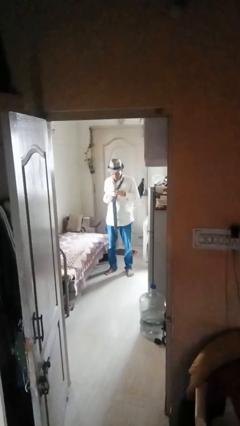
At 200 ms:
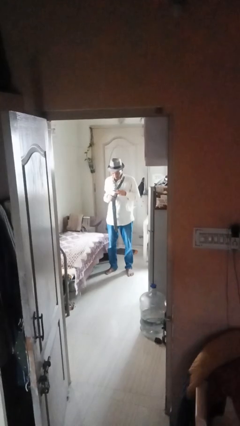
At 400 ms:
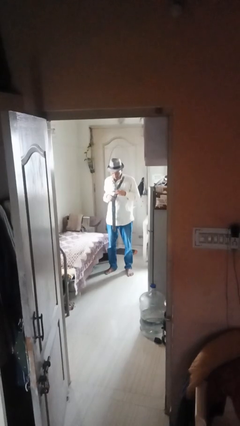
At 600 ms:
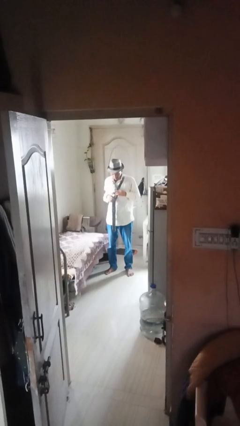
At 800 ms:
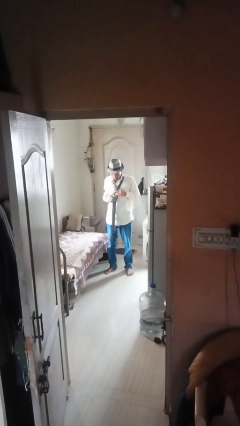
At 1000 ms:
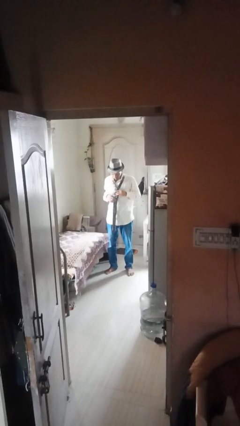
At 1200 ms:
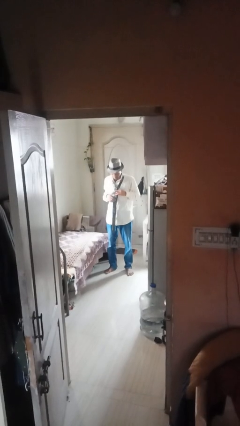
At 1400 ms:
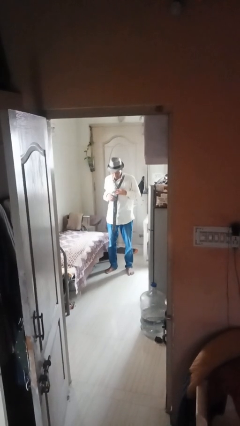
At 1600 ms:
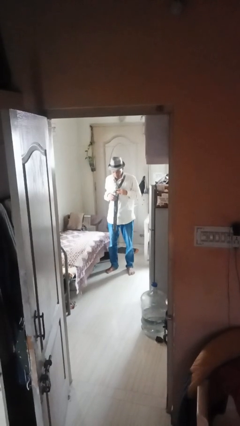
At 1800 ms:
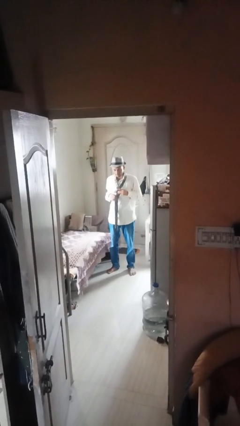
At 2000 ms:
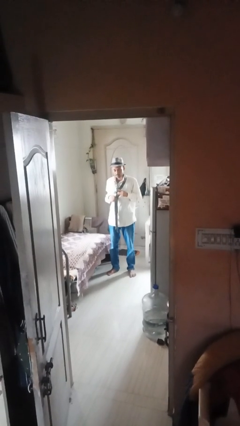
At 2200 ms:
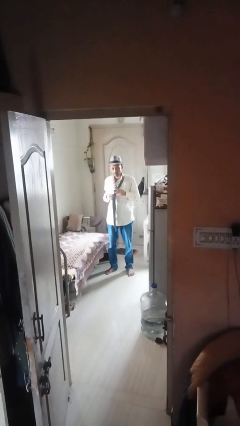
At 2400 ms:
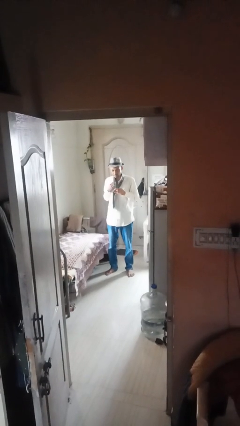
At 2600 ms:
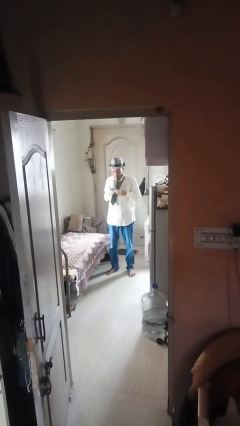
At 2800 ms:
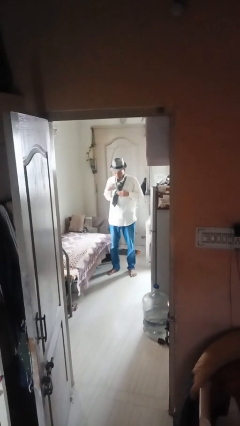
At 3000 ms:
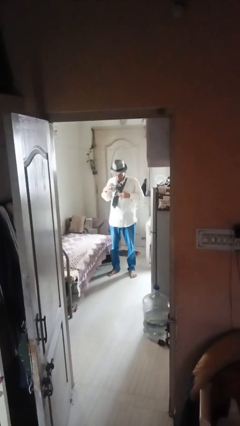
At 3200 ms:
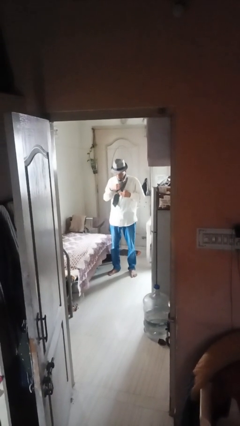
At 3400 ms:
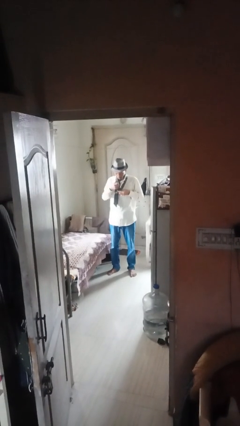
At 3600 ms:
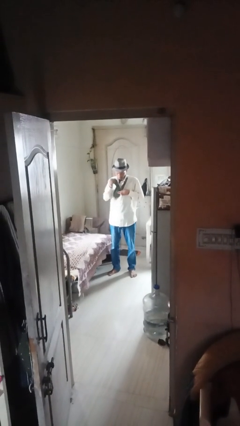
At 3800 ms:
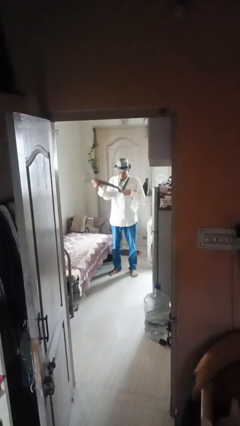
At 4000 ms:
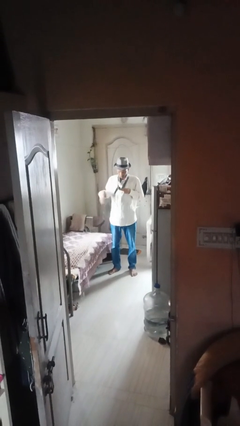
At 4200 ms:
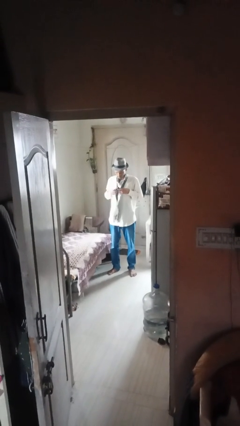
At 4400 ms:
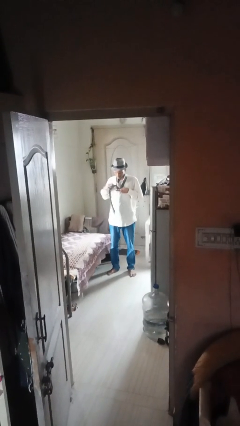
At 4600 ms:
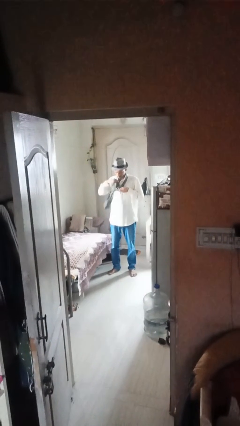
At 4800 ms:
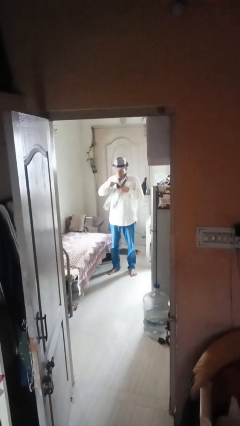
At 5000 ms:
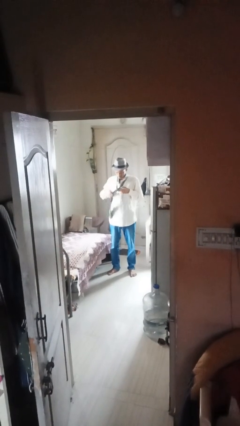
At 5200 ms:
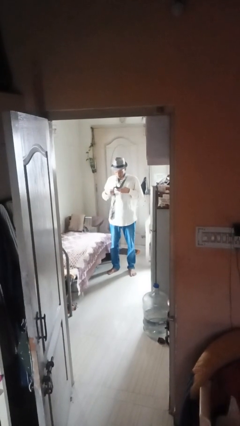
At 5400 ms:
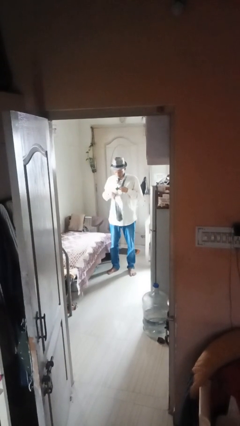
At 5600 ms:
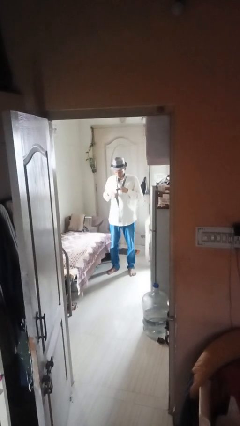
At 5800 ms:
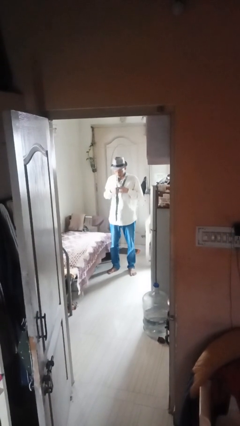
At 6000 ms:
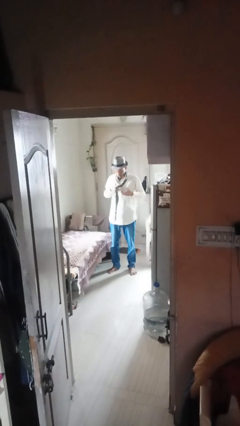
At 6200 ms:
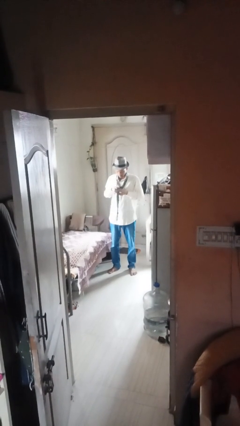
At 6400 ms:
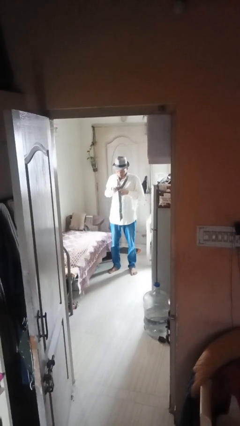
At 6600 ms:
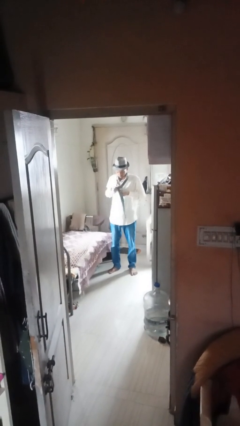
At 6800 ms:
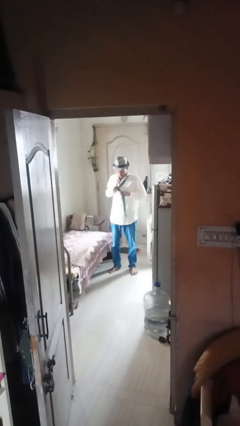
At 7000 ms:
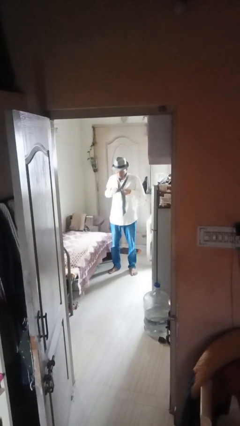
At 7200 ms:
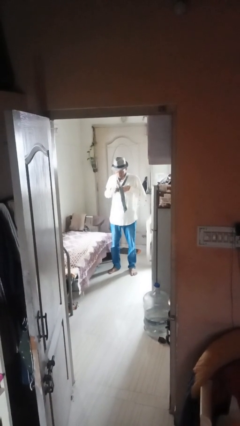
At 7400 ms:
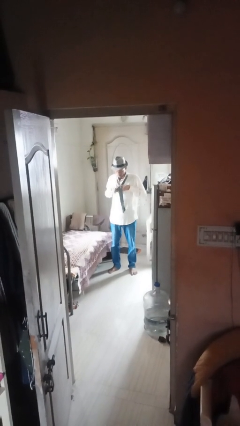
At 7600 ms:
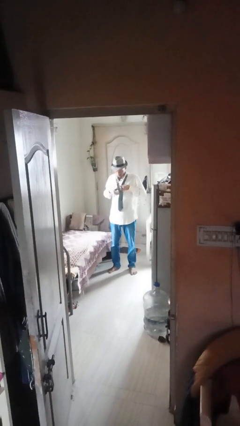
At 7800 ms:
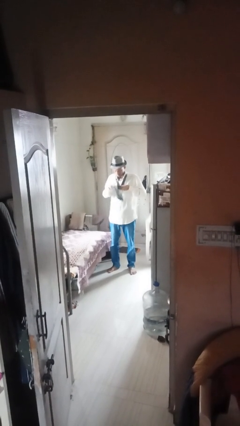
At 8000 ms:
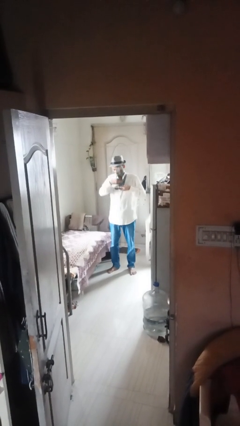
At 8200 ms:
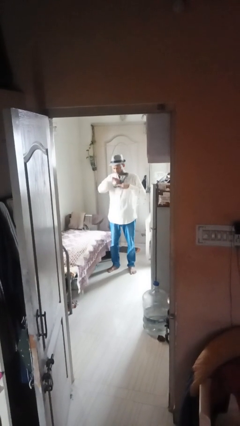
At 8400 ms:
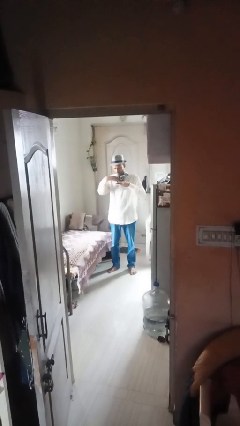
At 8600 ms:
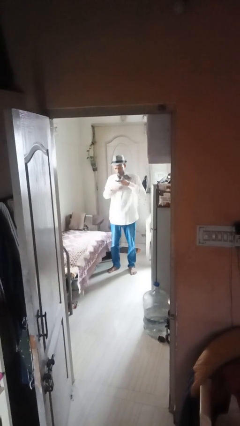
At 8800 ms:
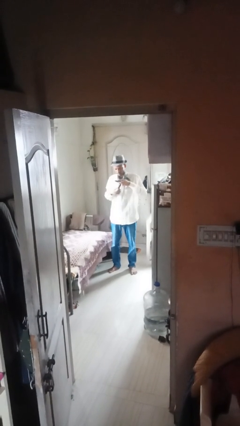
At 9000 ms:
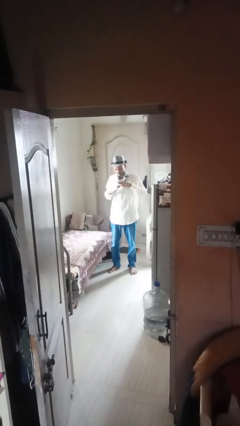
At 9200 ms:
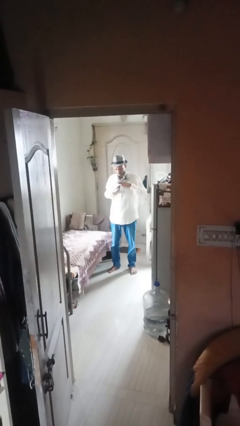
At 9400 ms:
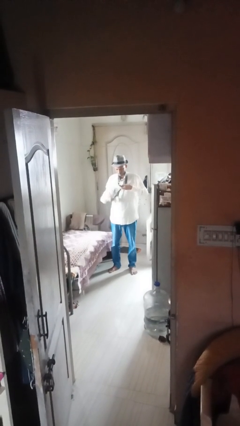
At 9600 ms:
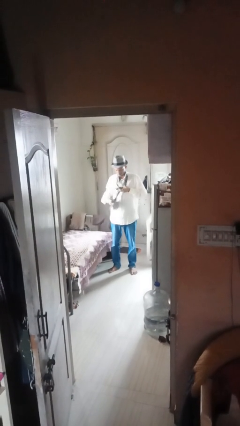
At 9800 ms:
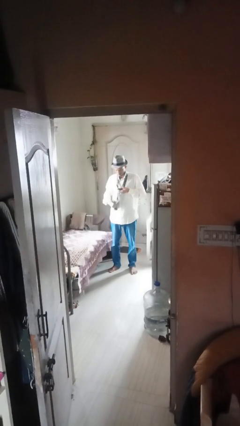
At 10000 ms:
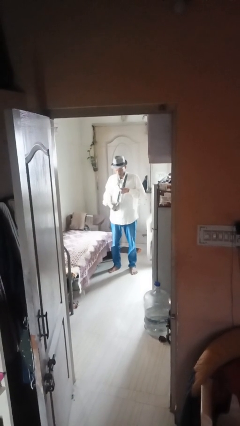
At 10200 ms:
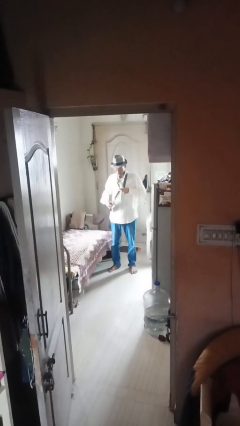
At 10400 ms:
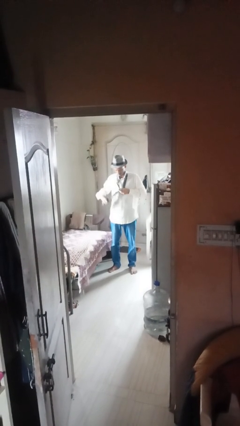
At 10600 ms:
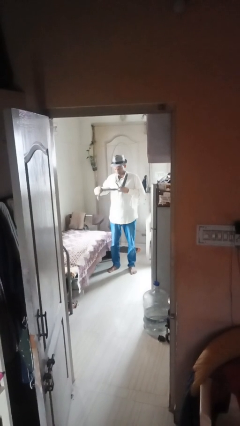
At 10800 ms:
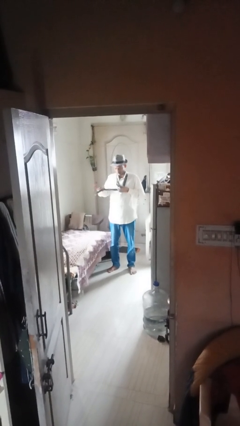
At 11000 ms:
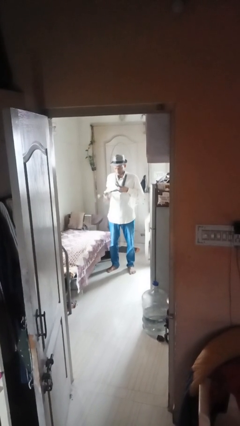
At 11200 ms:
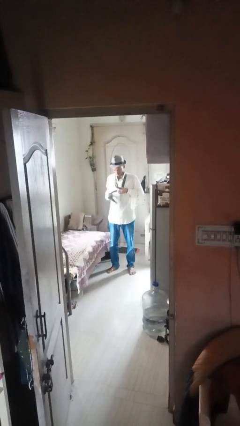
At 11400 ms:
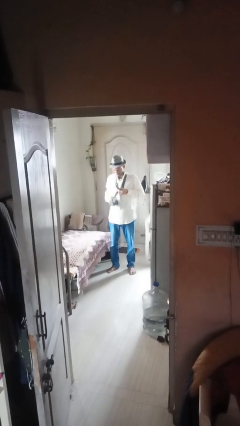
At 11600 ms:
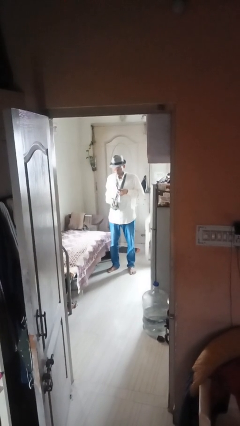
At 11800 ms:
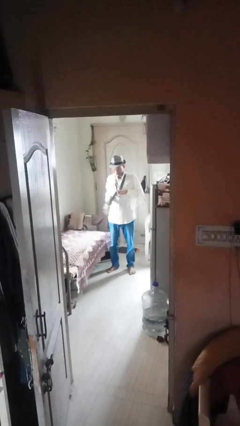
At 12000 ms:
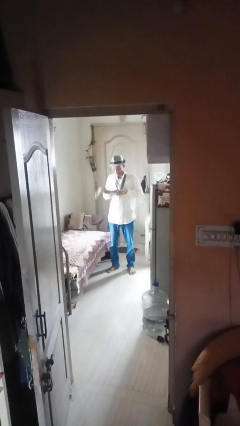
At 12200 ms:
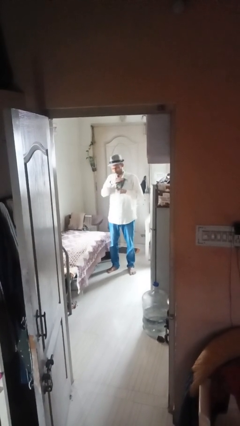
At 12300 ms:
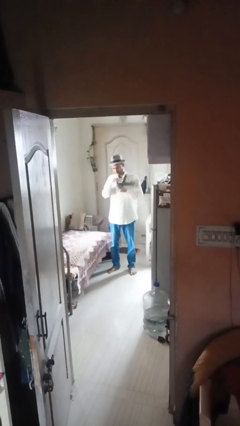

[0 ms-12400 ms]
person puts on necktie

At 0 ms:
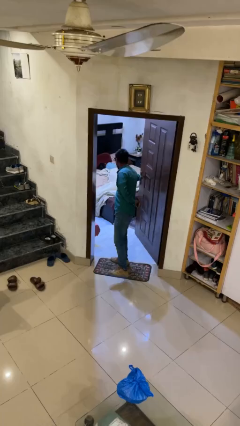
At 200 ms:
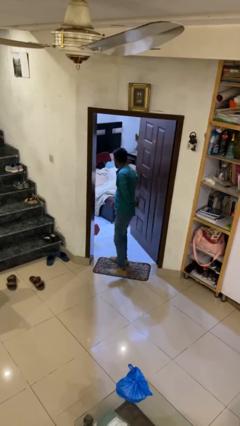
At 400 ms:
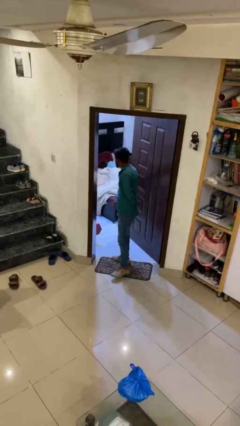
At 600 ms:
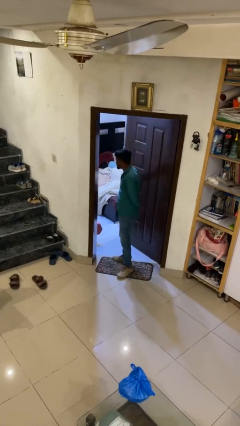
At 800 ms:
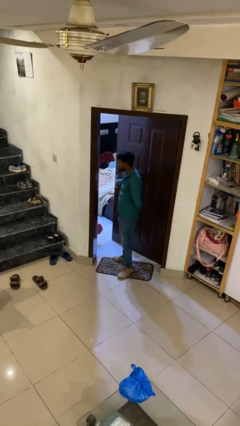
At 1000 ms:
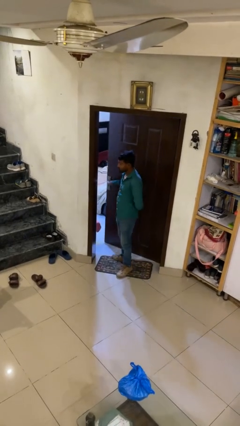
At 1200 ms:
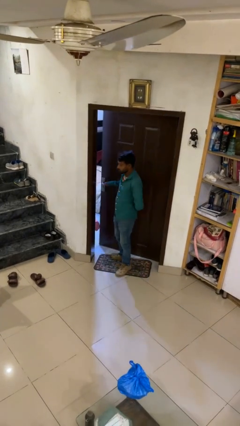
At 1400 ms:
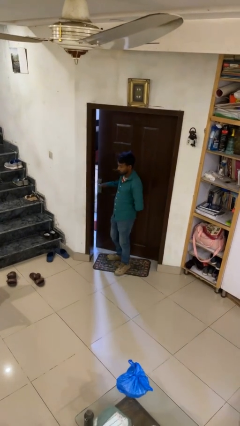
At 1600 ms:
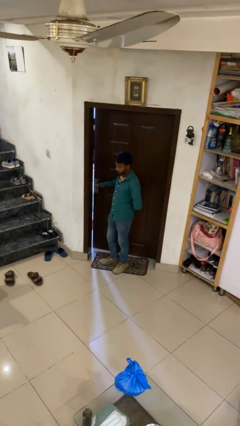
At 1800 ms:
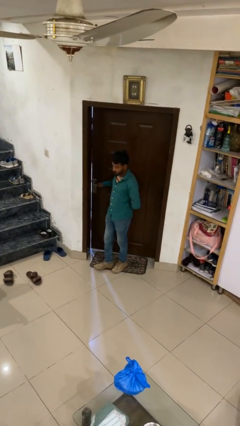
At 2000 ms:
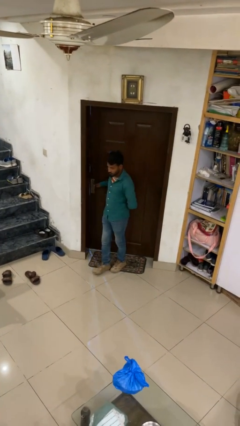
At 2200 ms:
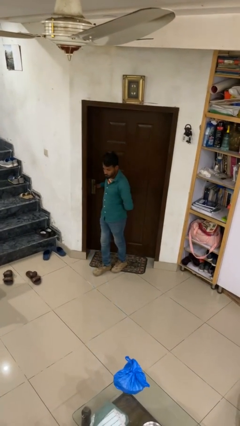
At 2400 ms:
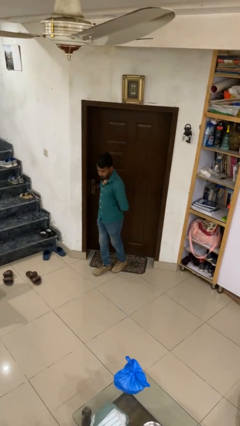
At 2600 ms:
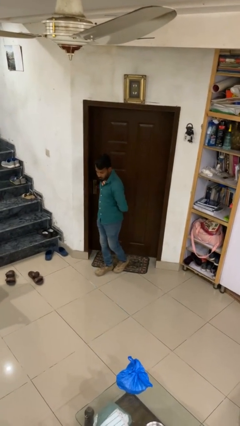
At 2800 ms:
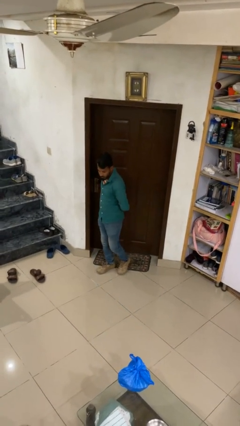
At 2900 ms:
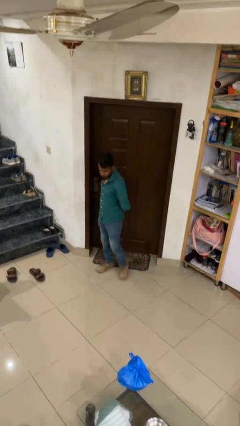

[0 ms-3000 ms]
person closes facility door

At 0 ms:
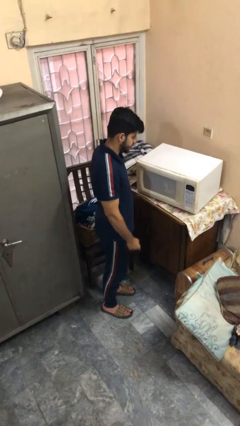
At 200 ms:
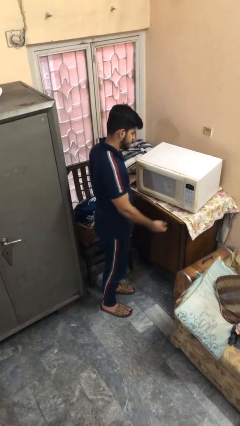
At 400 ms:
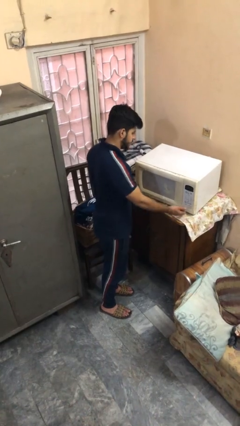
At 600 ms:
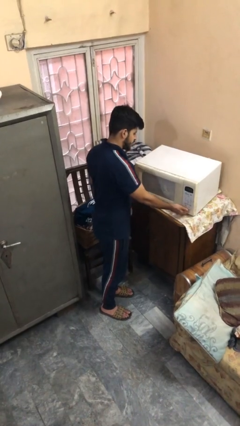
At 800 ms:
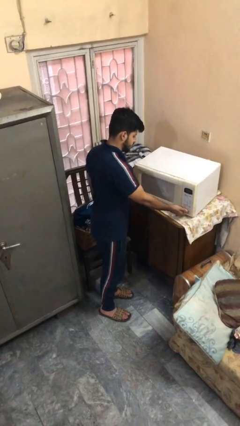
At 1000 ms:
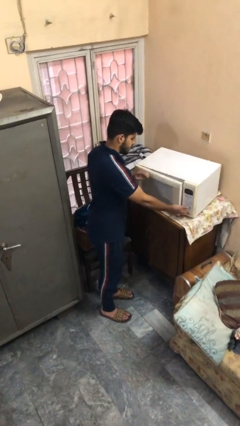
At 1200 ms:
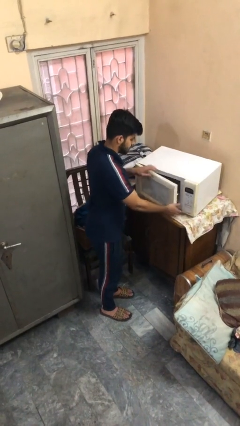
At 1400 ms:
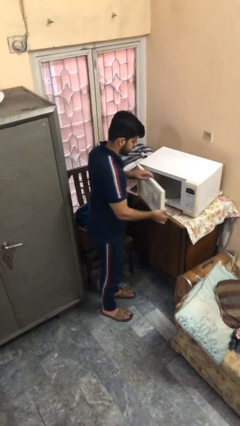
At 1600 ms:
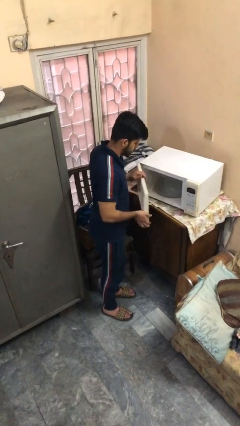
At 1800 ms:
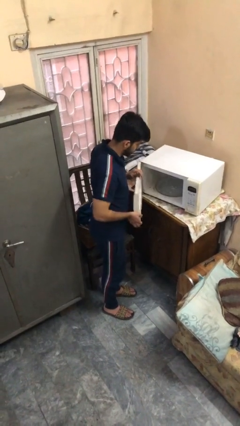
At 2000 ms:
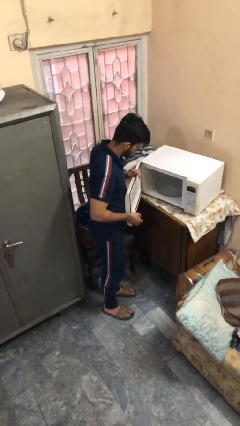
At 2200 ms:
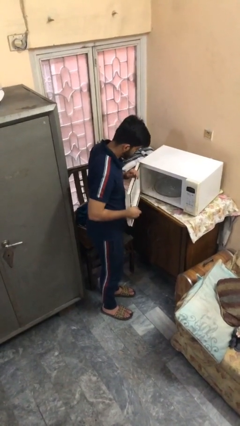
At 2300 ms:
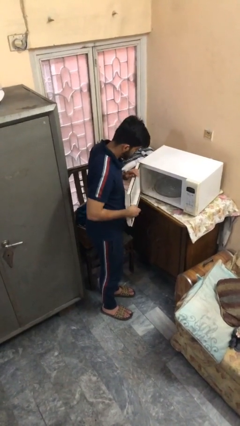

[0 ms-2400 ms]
person opens microwave
